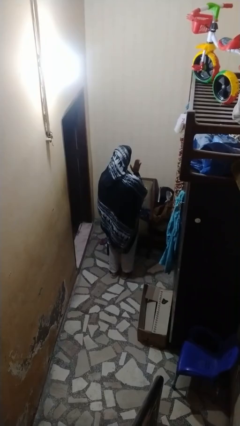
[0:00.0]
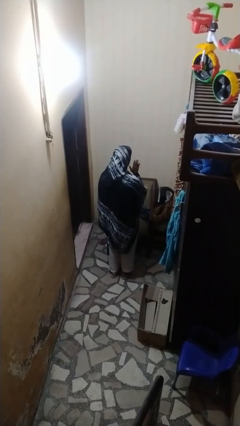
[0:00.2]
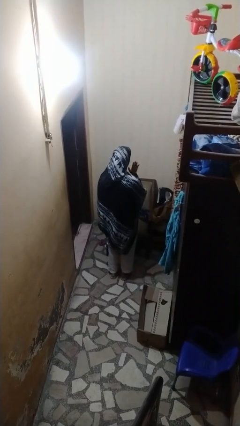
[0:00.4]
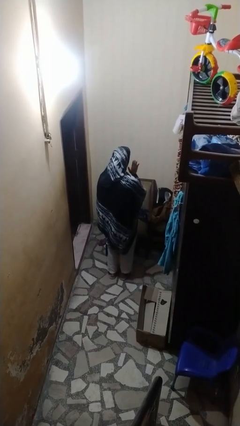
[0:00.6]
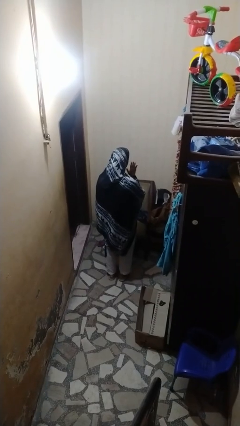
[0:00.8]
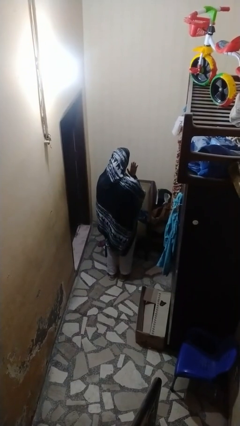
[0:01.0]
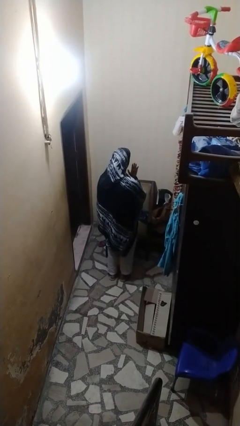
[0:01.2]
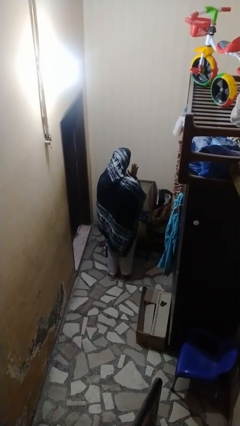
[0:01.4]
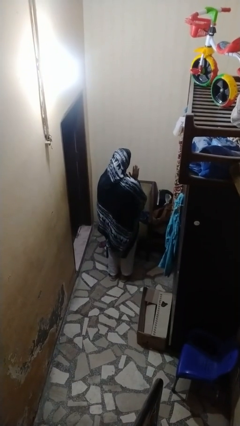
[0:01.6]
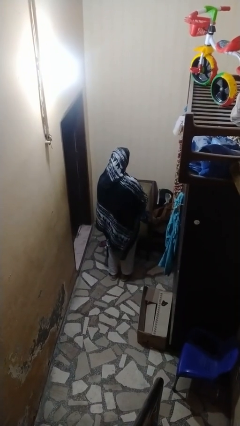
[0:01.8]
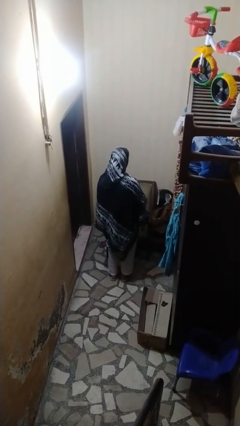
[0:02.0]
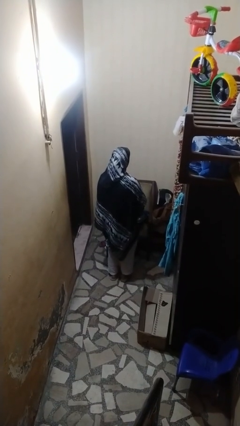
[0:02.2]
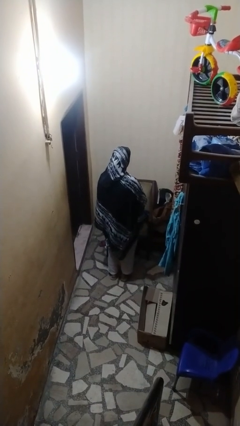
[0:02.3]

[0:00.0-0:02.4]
person gestures stop

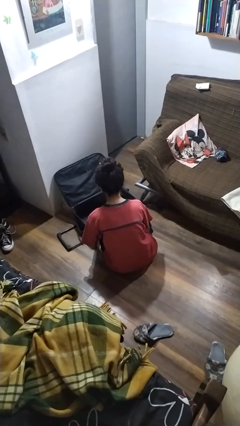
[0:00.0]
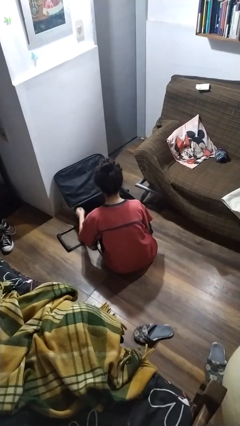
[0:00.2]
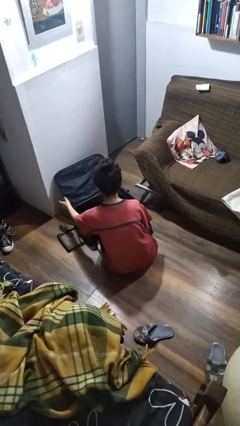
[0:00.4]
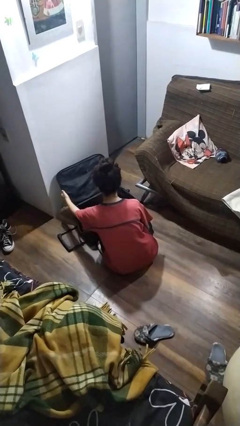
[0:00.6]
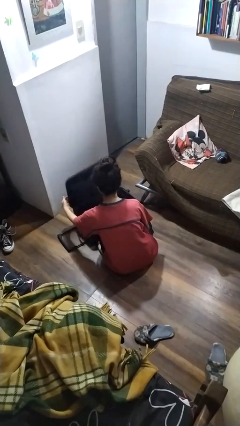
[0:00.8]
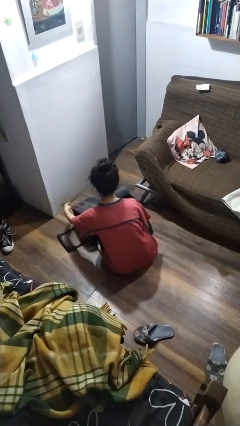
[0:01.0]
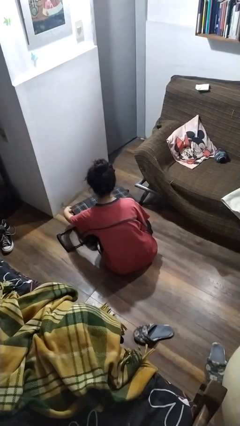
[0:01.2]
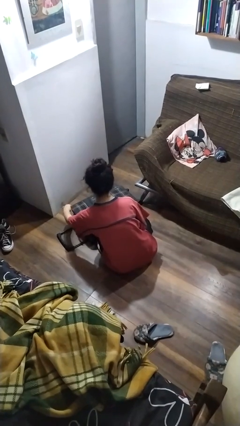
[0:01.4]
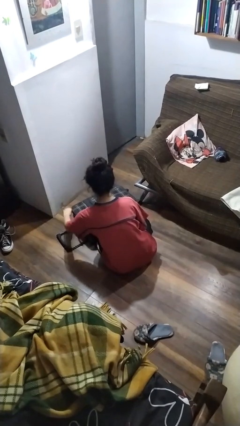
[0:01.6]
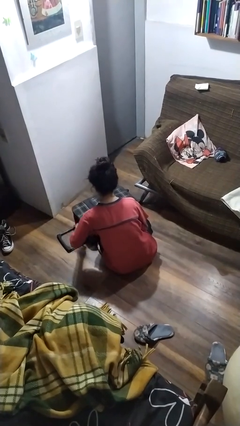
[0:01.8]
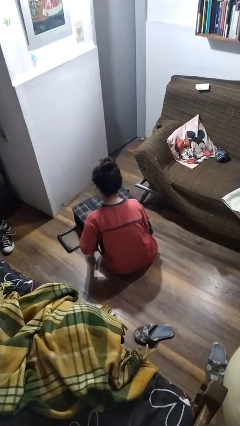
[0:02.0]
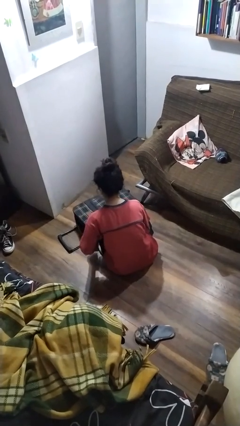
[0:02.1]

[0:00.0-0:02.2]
person closes suitcase

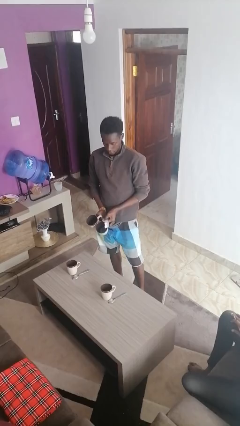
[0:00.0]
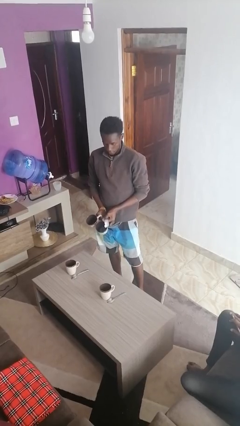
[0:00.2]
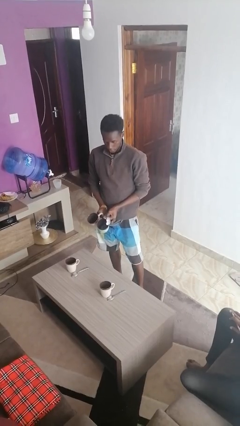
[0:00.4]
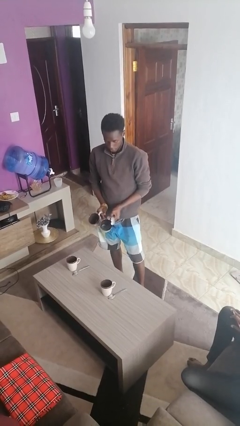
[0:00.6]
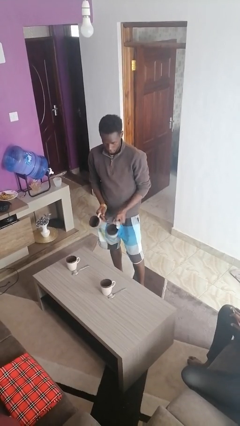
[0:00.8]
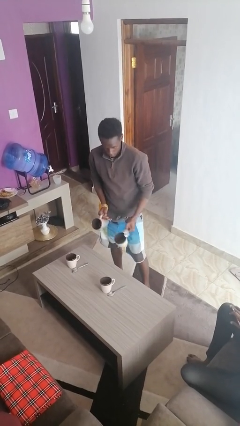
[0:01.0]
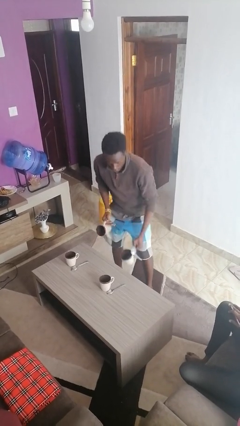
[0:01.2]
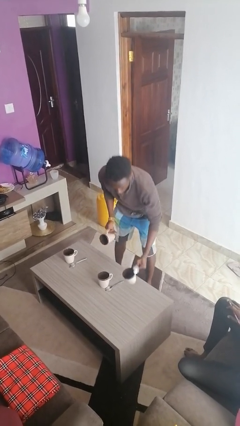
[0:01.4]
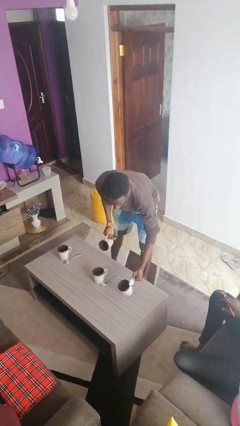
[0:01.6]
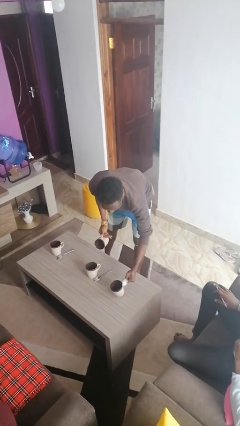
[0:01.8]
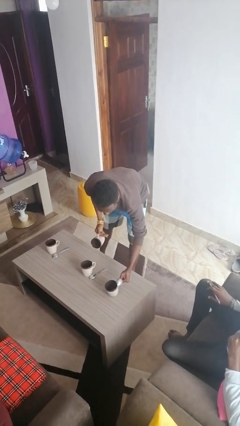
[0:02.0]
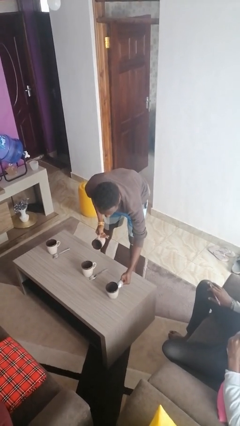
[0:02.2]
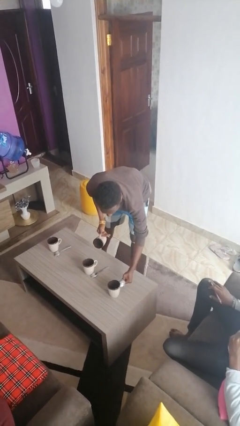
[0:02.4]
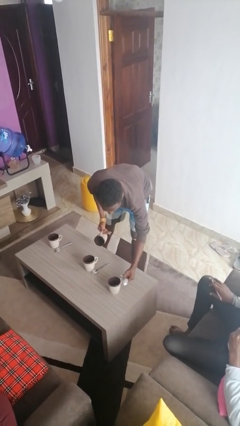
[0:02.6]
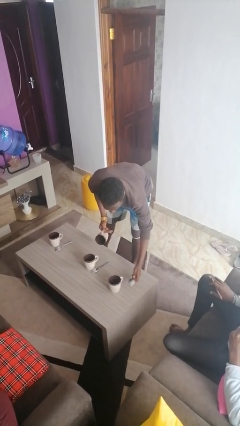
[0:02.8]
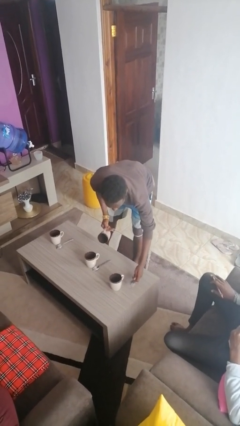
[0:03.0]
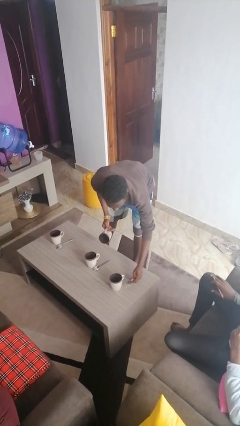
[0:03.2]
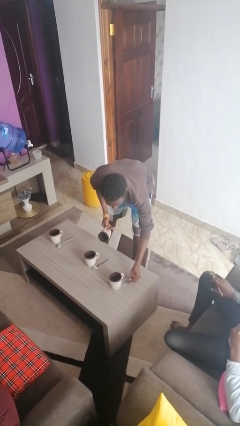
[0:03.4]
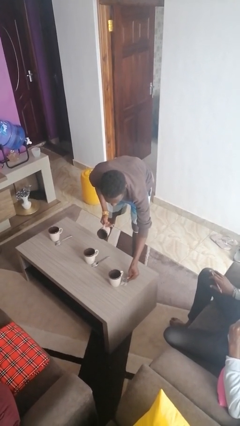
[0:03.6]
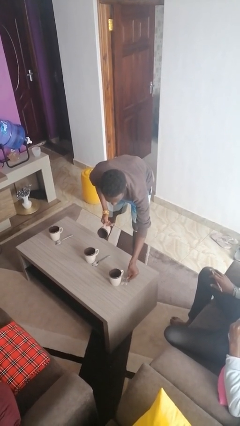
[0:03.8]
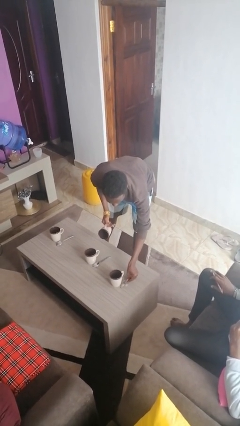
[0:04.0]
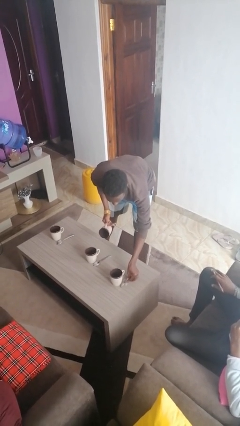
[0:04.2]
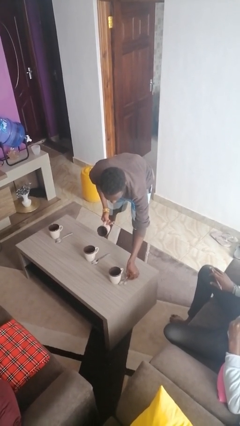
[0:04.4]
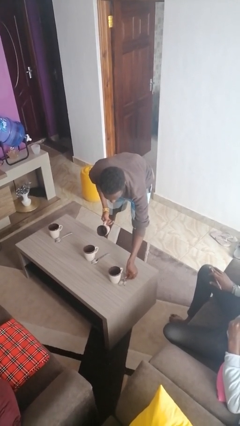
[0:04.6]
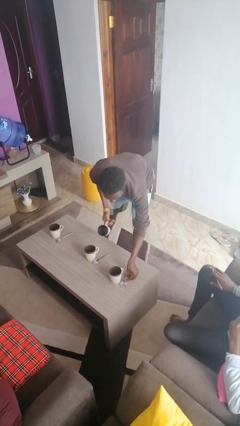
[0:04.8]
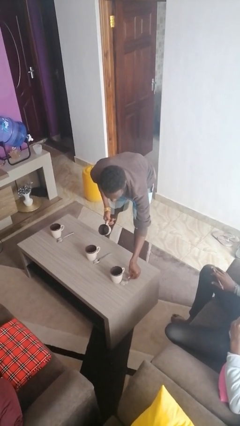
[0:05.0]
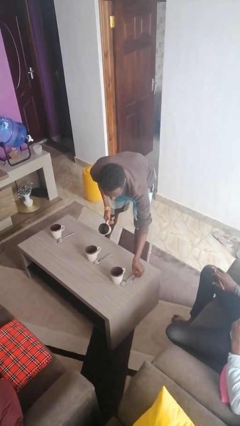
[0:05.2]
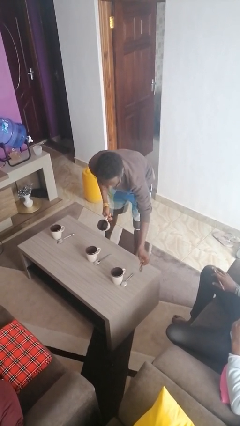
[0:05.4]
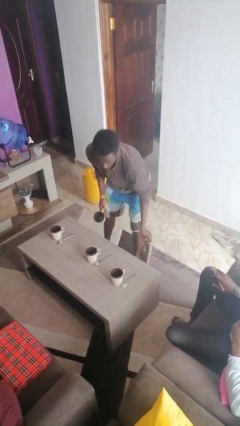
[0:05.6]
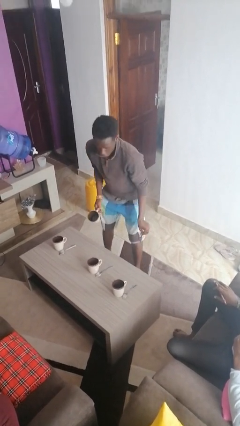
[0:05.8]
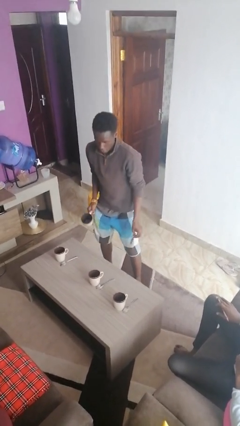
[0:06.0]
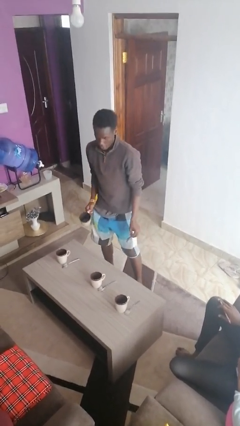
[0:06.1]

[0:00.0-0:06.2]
person sets table

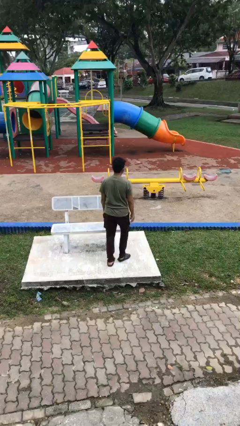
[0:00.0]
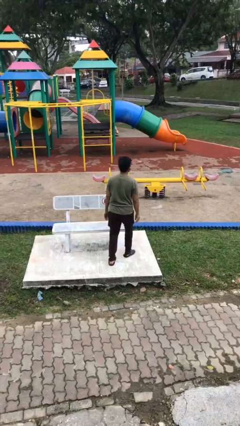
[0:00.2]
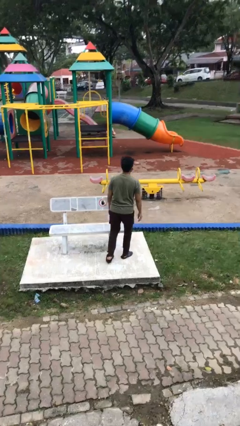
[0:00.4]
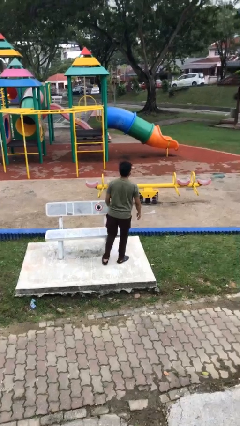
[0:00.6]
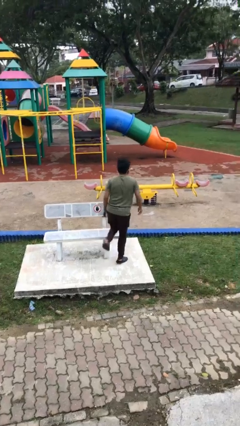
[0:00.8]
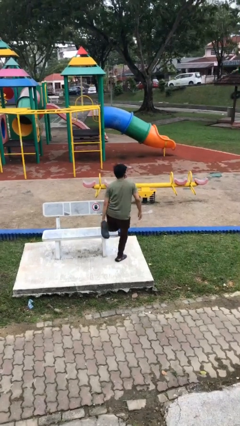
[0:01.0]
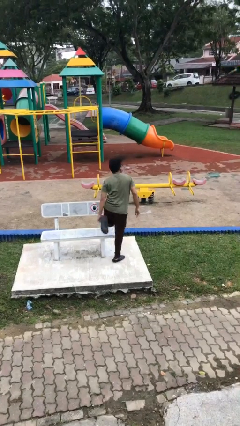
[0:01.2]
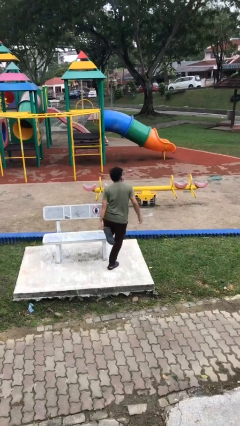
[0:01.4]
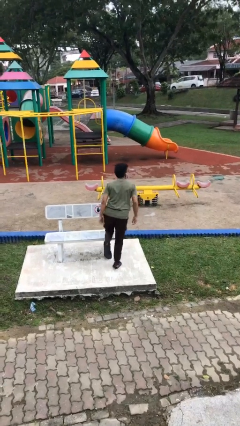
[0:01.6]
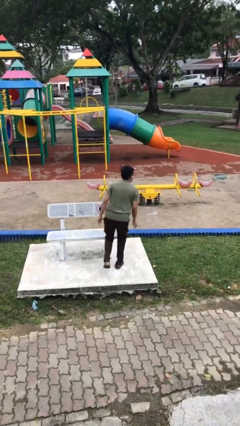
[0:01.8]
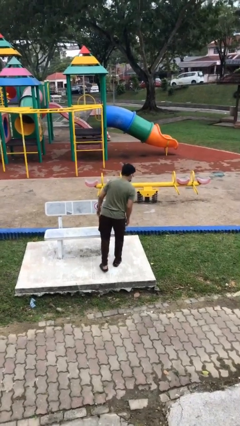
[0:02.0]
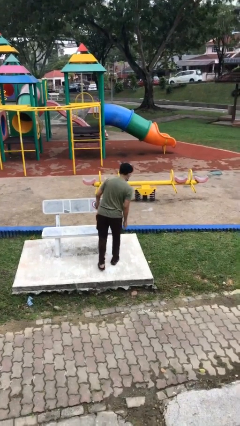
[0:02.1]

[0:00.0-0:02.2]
person stubs toe

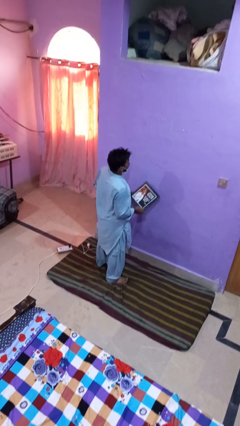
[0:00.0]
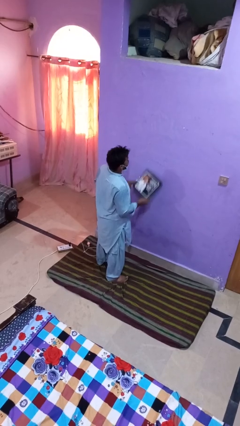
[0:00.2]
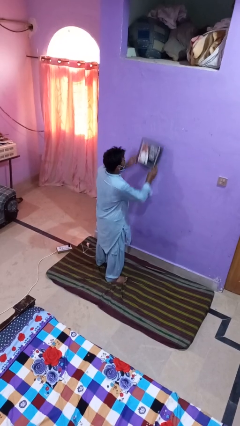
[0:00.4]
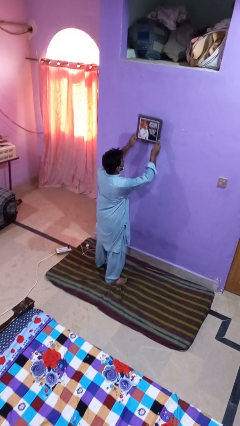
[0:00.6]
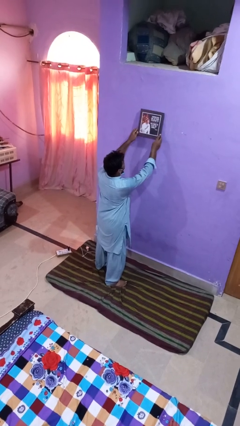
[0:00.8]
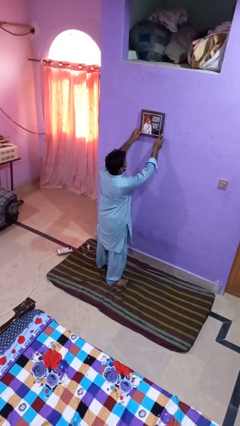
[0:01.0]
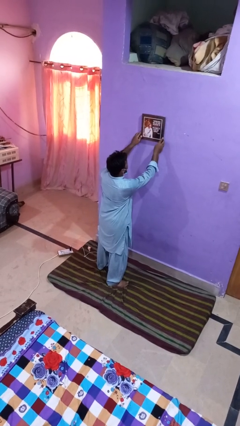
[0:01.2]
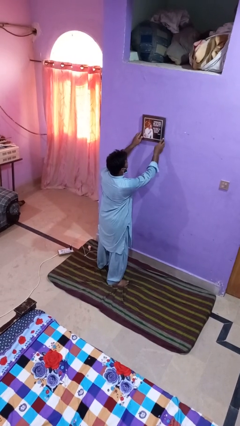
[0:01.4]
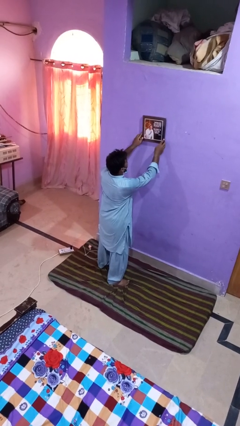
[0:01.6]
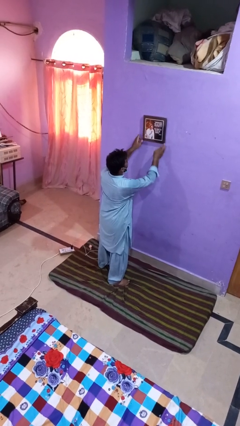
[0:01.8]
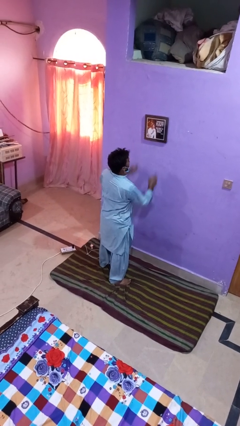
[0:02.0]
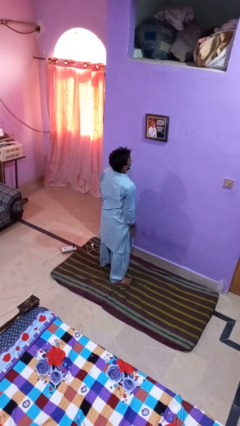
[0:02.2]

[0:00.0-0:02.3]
person puts up picture frame

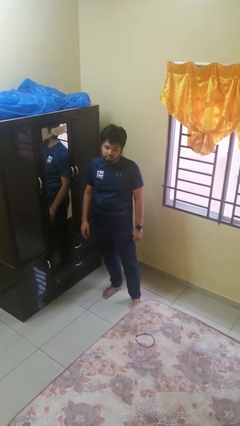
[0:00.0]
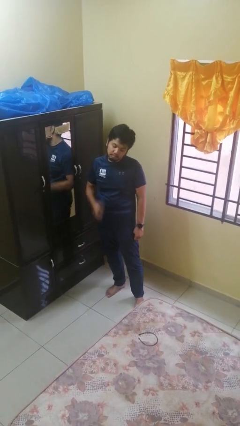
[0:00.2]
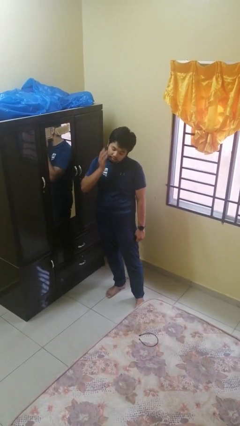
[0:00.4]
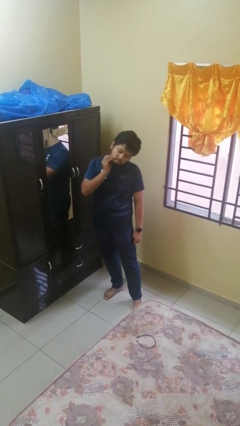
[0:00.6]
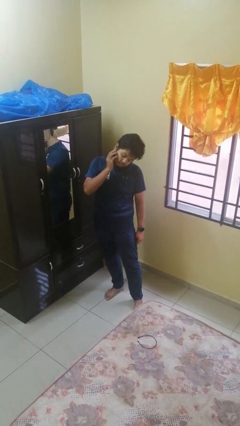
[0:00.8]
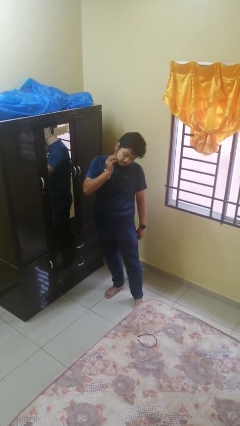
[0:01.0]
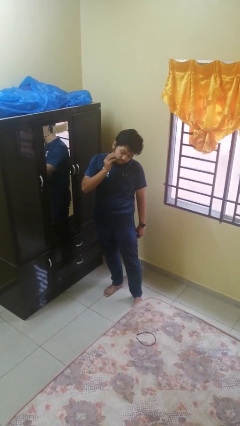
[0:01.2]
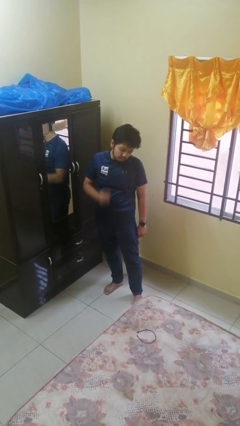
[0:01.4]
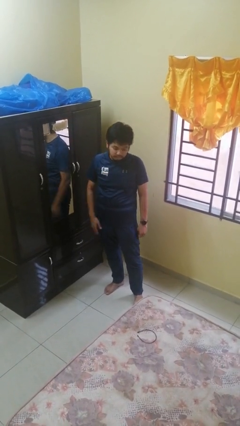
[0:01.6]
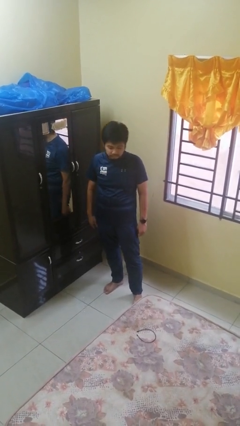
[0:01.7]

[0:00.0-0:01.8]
person scratches face

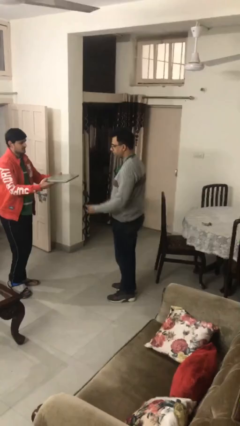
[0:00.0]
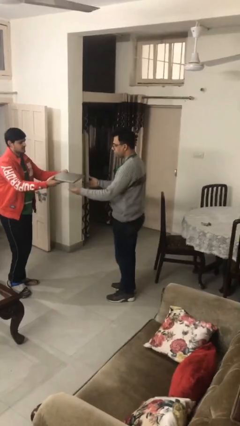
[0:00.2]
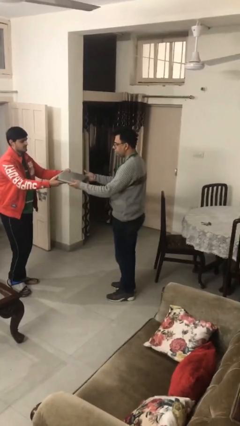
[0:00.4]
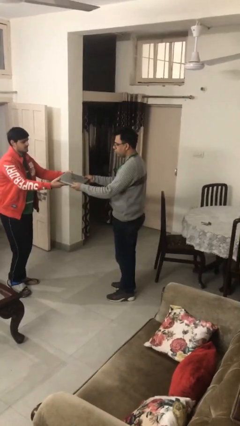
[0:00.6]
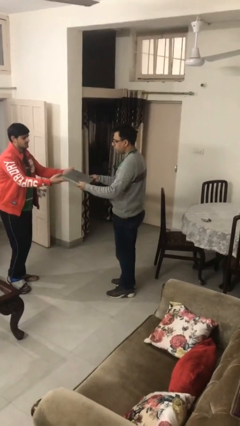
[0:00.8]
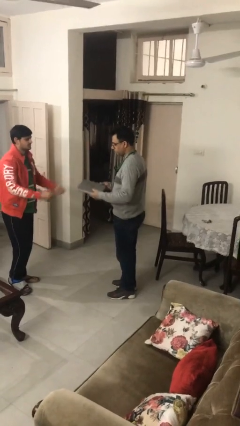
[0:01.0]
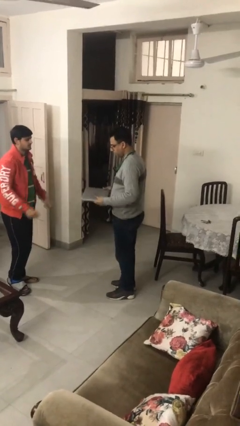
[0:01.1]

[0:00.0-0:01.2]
person transfers object to person
